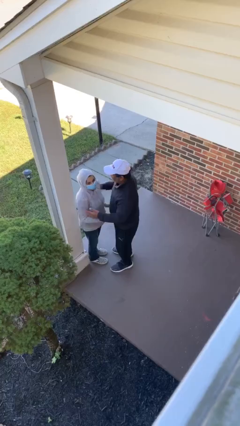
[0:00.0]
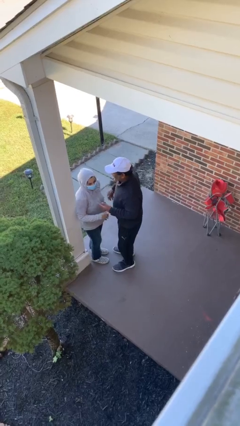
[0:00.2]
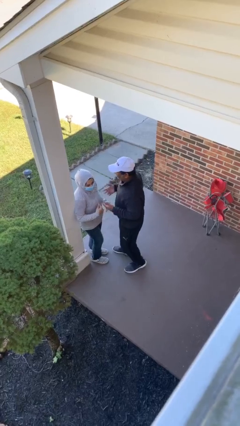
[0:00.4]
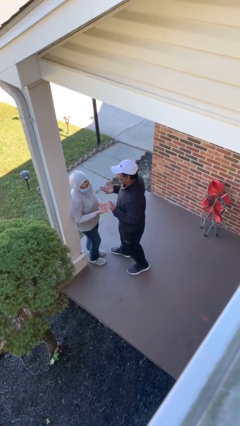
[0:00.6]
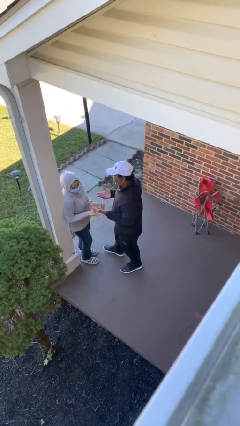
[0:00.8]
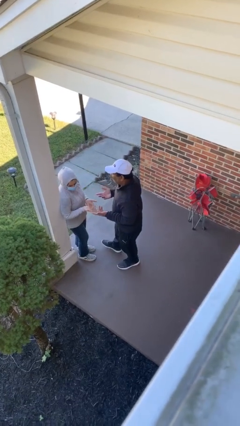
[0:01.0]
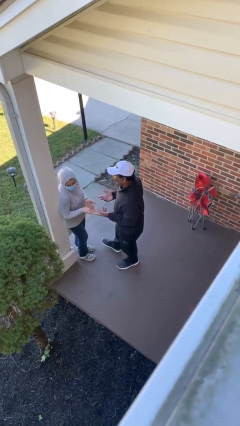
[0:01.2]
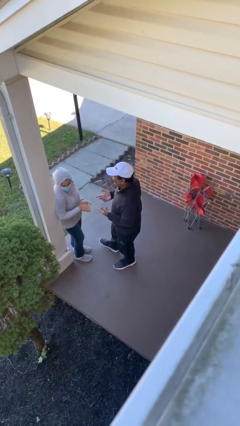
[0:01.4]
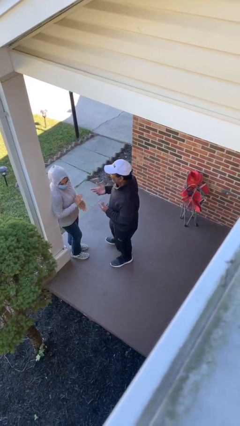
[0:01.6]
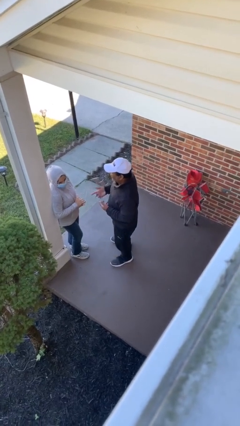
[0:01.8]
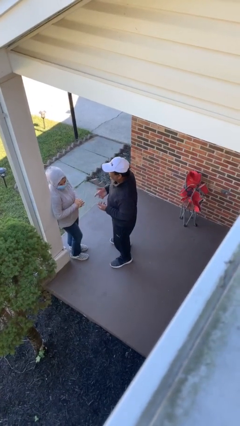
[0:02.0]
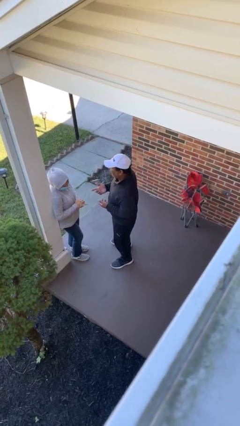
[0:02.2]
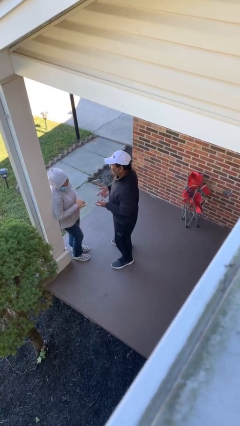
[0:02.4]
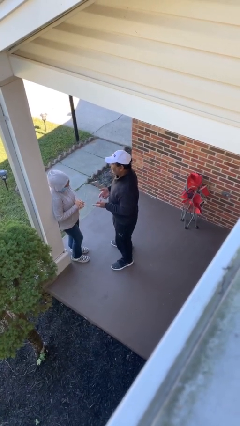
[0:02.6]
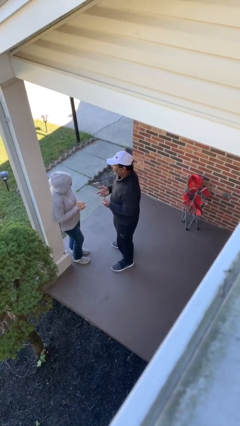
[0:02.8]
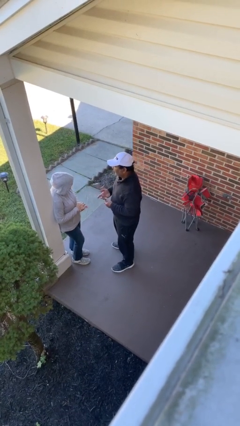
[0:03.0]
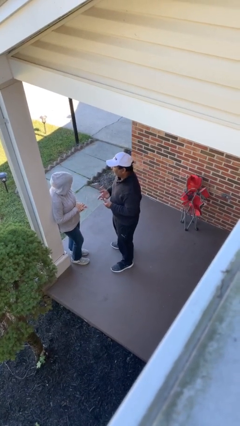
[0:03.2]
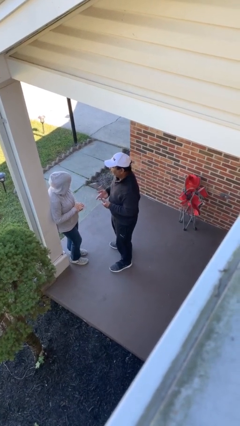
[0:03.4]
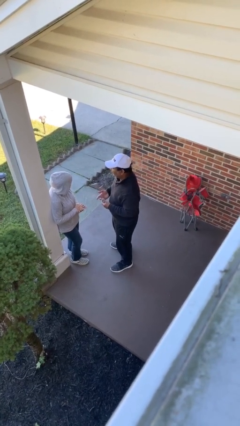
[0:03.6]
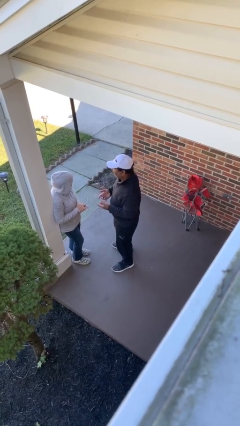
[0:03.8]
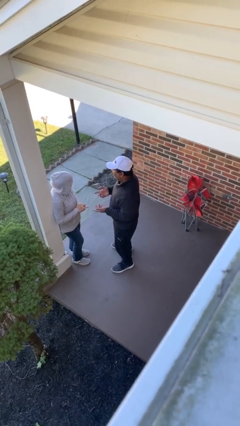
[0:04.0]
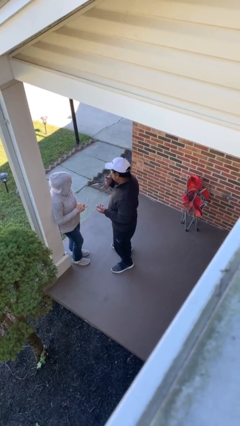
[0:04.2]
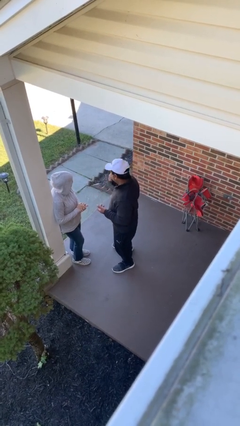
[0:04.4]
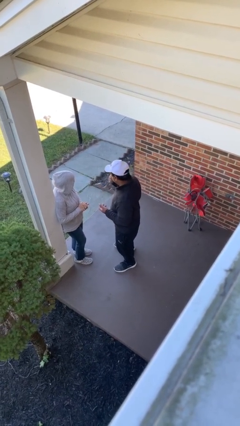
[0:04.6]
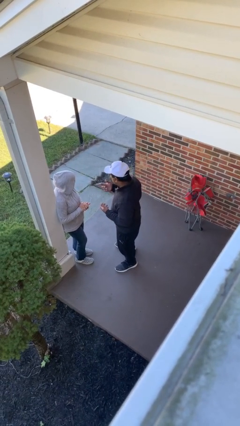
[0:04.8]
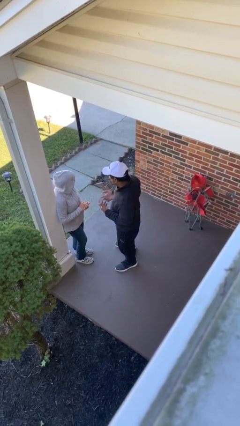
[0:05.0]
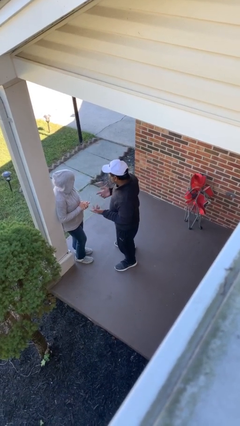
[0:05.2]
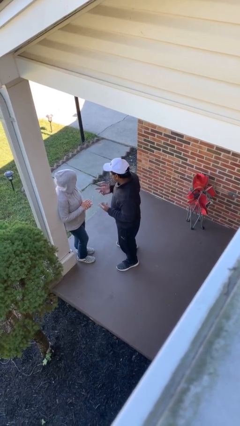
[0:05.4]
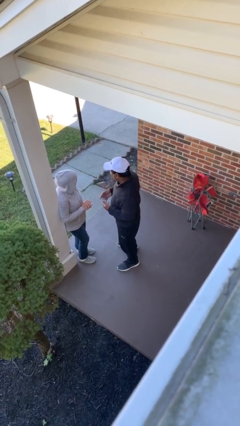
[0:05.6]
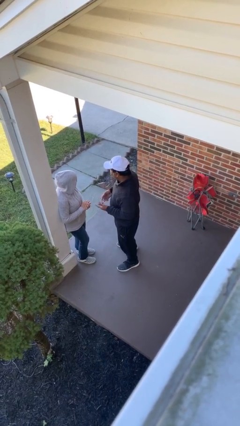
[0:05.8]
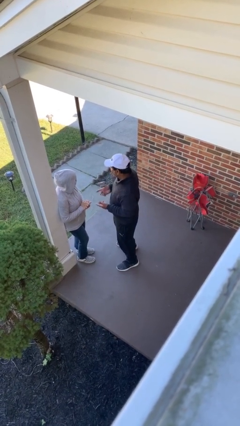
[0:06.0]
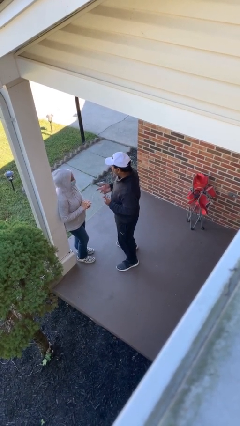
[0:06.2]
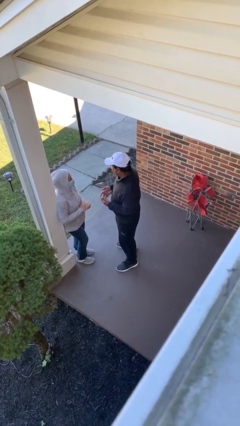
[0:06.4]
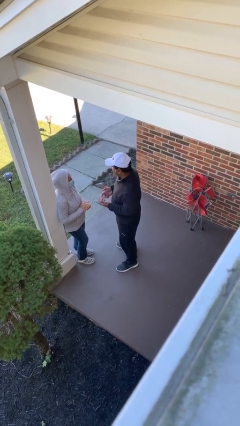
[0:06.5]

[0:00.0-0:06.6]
person talks to person

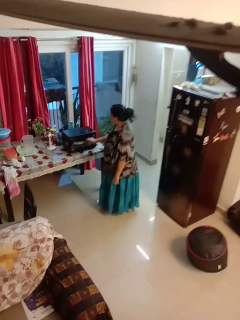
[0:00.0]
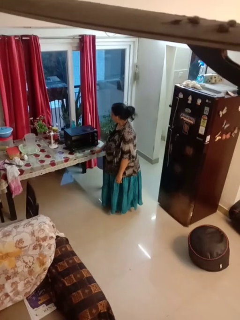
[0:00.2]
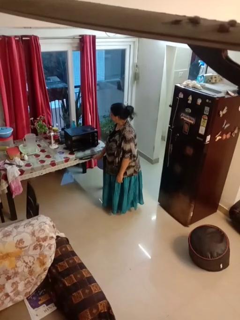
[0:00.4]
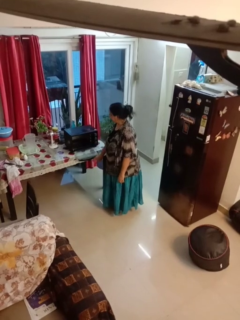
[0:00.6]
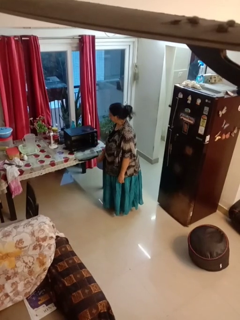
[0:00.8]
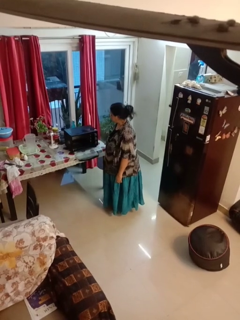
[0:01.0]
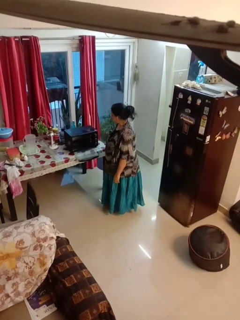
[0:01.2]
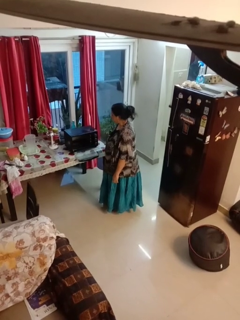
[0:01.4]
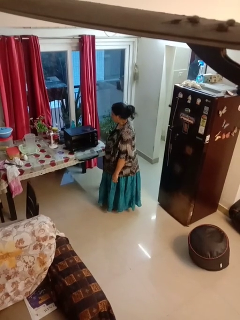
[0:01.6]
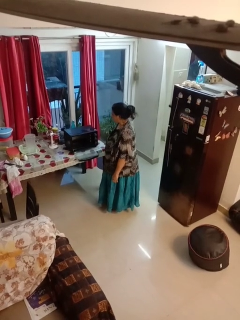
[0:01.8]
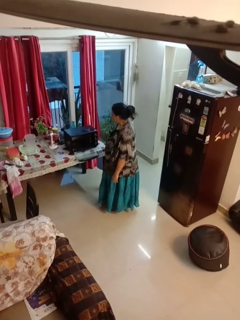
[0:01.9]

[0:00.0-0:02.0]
person opens microwave

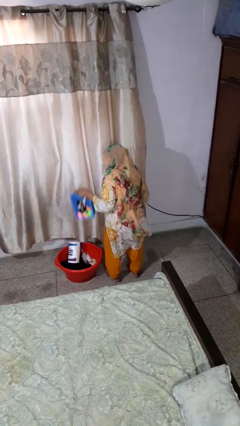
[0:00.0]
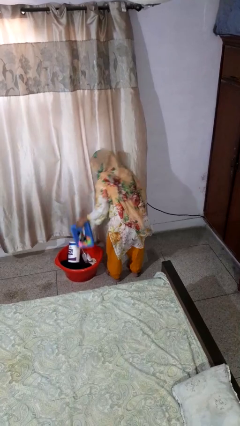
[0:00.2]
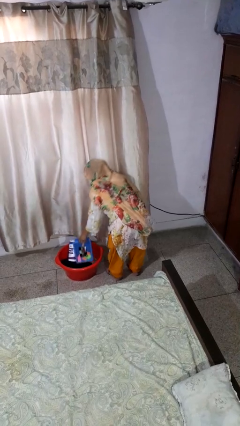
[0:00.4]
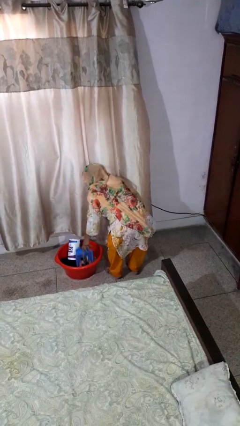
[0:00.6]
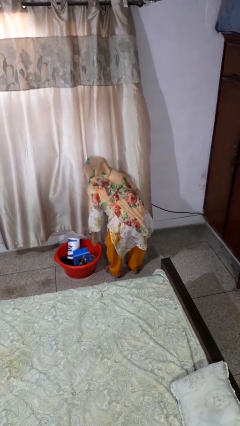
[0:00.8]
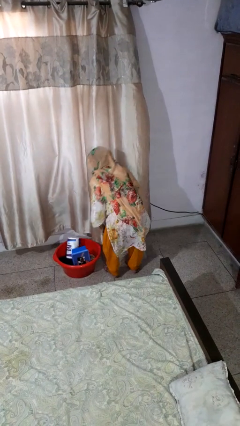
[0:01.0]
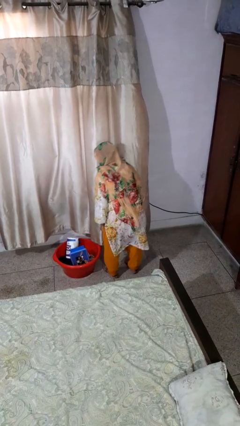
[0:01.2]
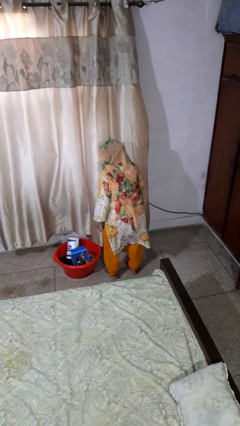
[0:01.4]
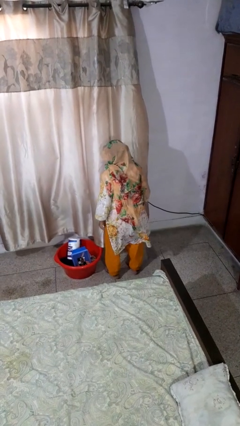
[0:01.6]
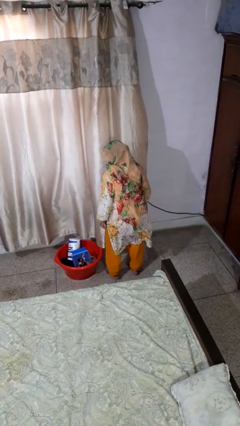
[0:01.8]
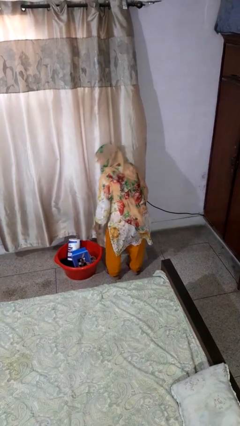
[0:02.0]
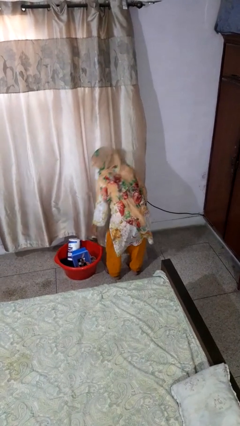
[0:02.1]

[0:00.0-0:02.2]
person puts object into basket

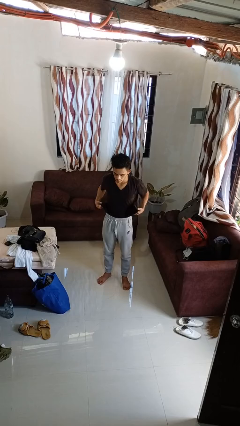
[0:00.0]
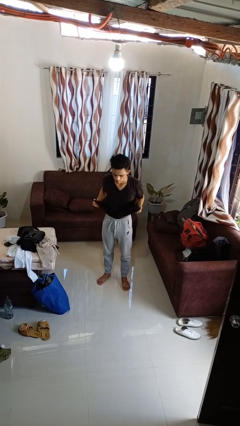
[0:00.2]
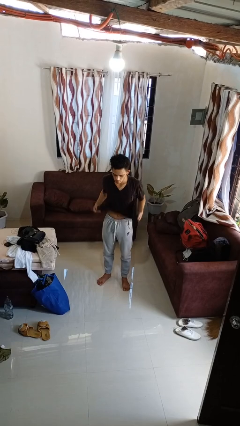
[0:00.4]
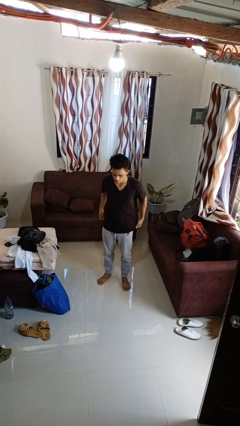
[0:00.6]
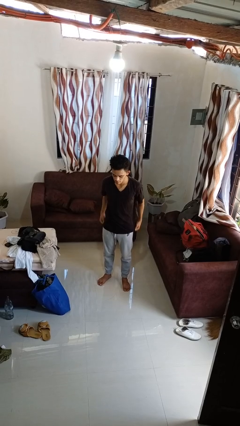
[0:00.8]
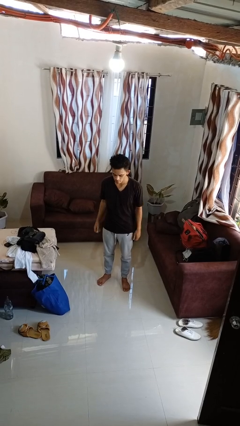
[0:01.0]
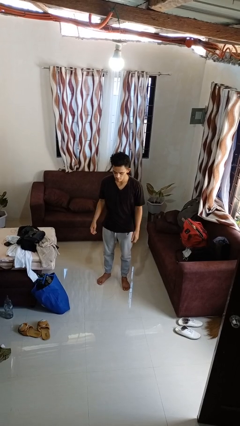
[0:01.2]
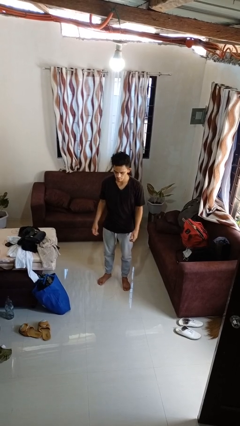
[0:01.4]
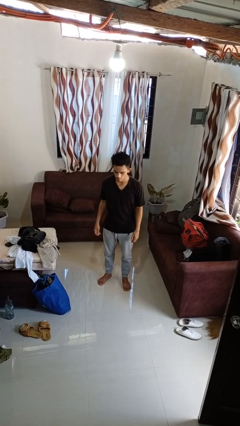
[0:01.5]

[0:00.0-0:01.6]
person untucks shirt

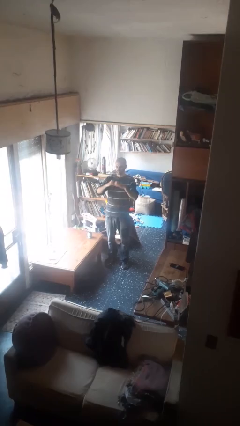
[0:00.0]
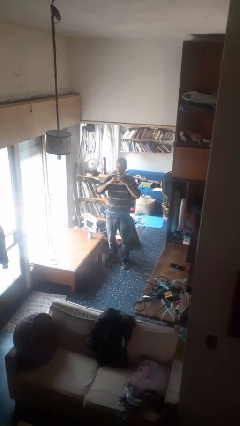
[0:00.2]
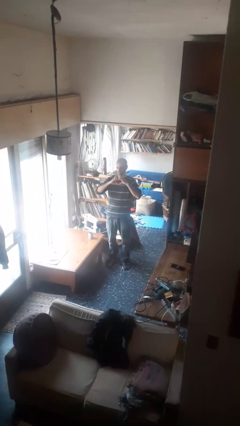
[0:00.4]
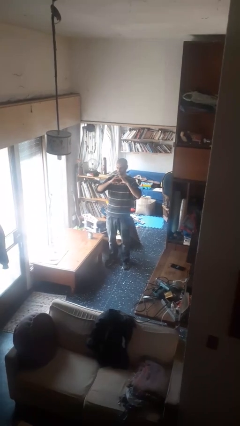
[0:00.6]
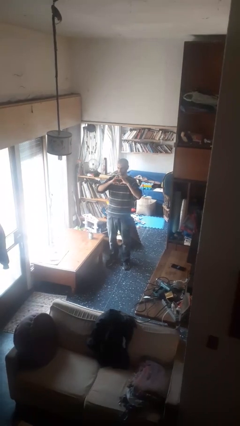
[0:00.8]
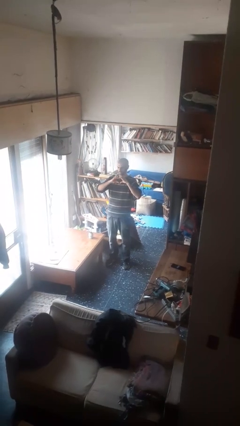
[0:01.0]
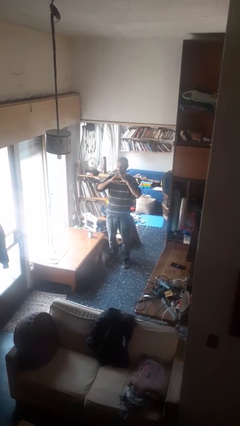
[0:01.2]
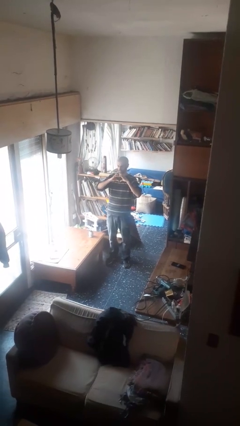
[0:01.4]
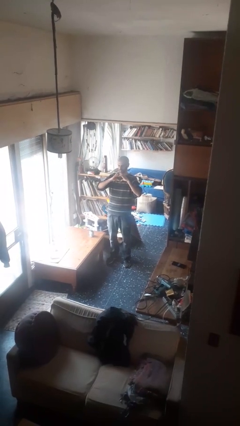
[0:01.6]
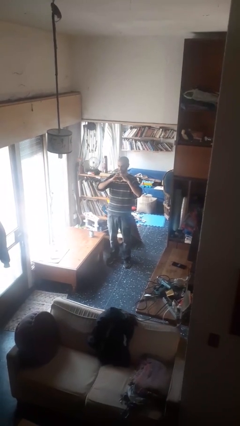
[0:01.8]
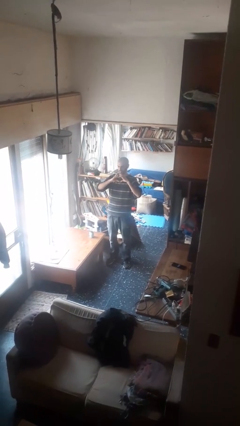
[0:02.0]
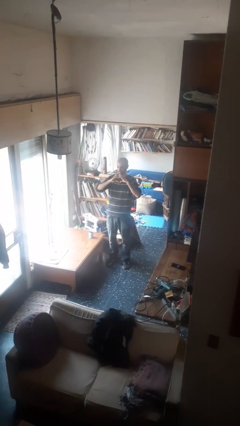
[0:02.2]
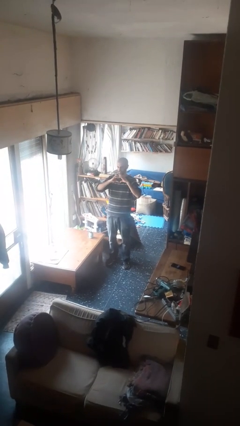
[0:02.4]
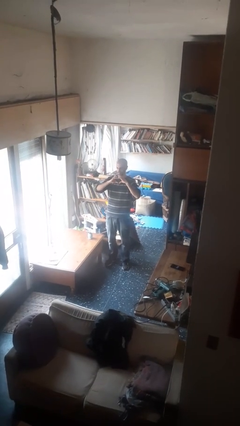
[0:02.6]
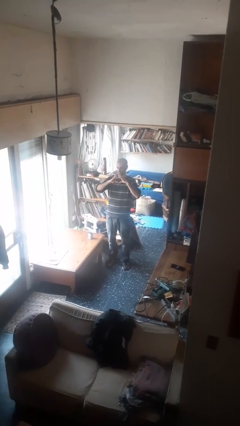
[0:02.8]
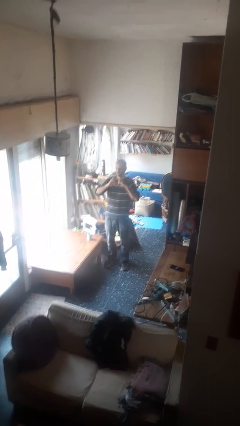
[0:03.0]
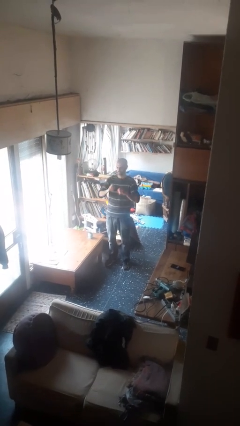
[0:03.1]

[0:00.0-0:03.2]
person gestures heart

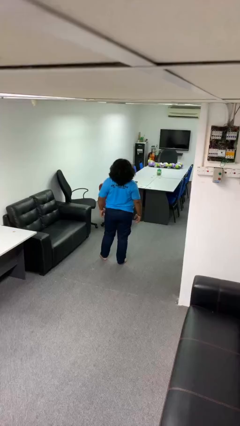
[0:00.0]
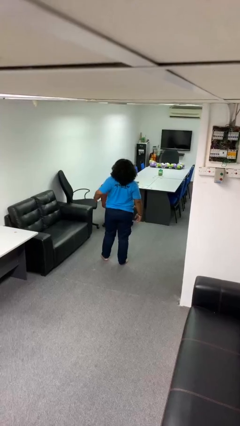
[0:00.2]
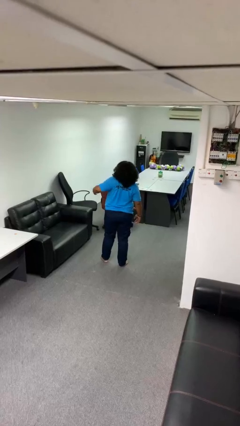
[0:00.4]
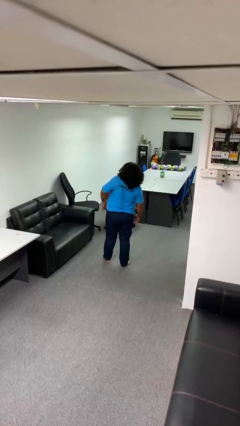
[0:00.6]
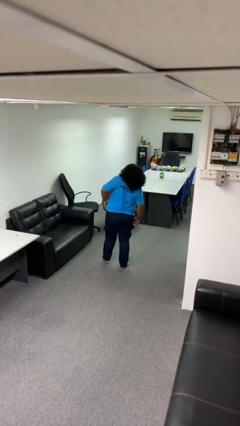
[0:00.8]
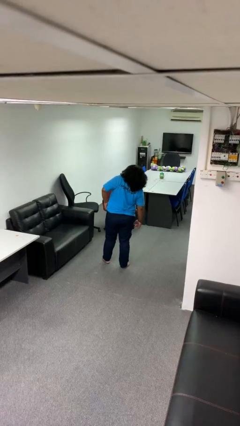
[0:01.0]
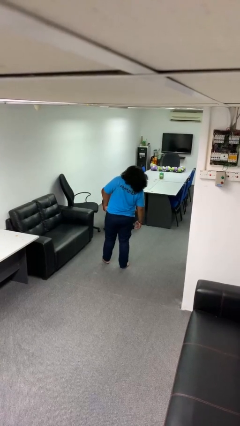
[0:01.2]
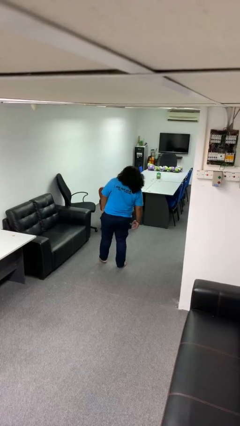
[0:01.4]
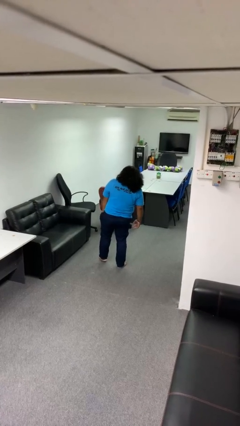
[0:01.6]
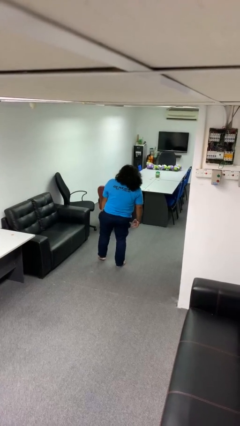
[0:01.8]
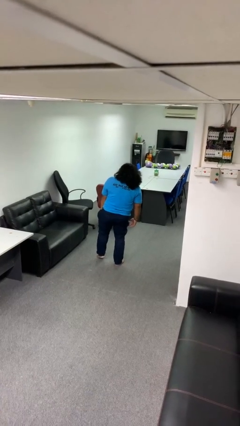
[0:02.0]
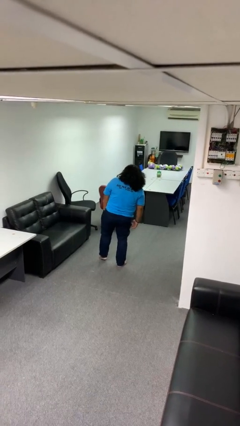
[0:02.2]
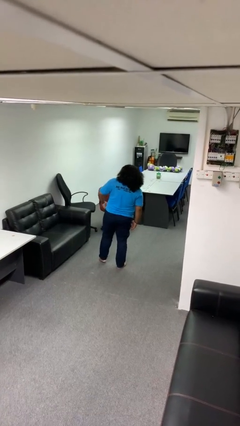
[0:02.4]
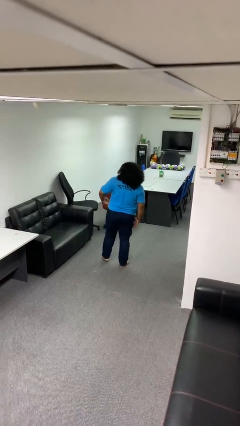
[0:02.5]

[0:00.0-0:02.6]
person puts hands in back pockets
